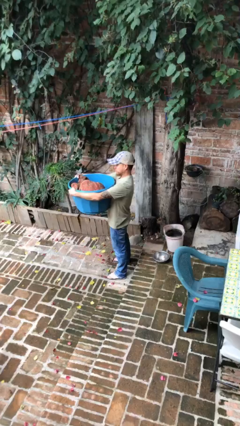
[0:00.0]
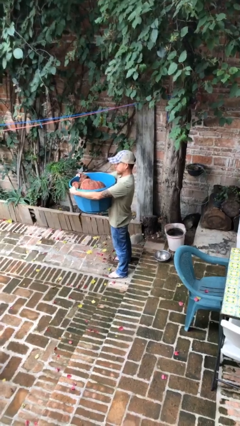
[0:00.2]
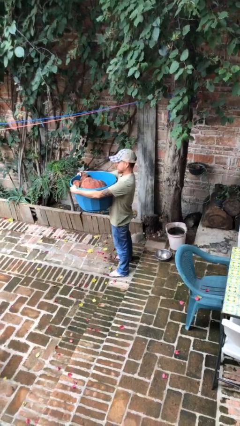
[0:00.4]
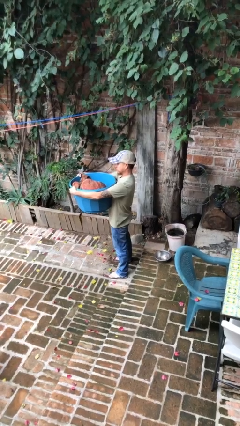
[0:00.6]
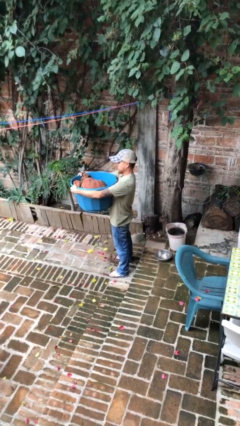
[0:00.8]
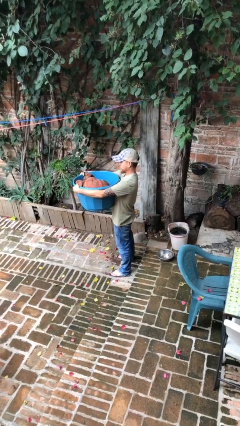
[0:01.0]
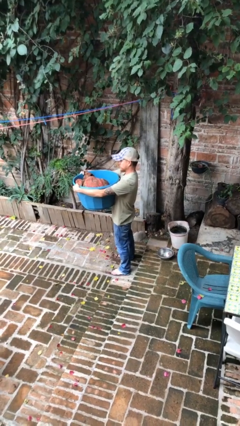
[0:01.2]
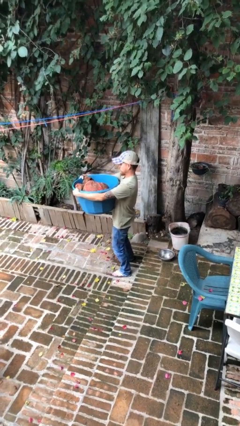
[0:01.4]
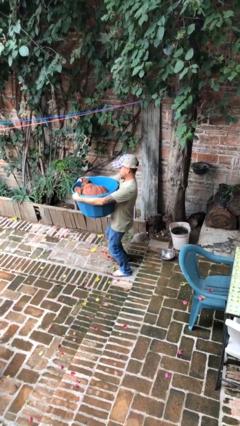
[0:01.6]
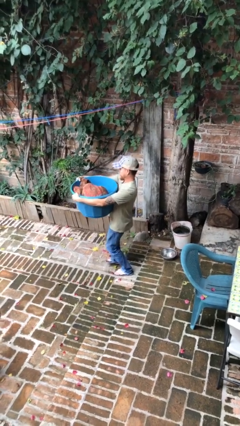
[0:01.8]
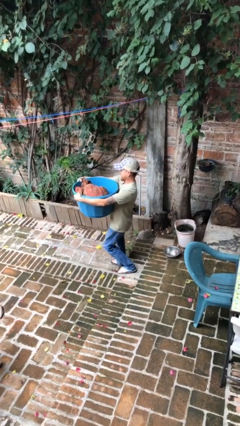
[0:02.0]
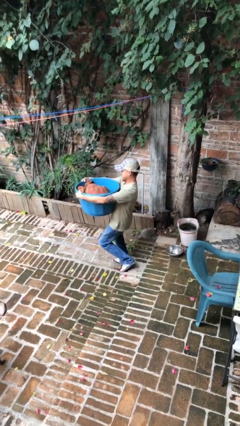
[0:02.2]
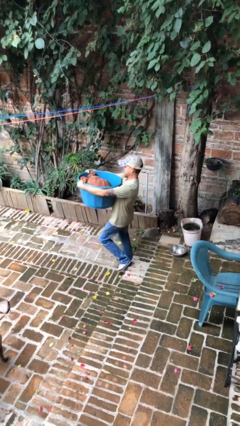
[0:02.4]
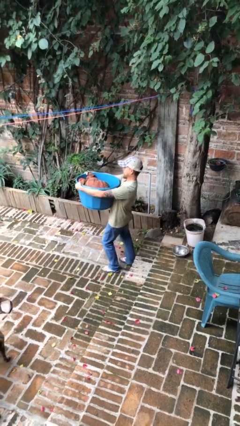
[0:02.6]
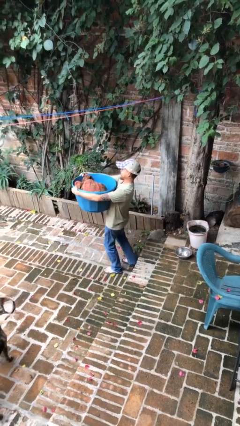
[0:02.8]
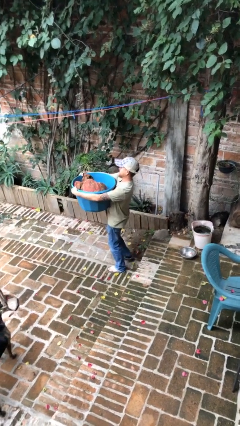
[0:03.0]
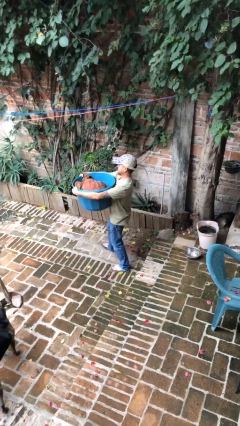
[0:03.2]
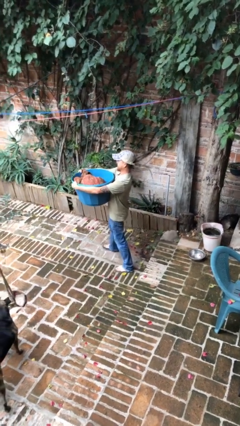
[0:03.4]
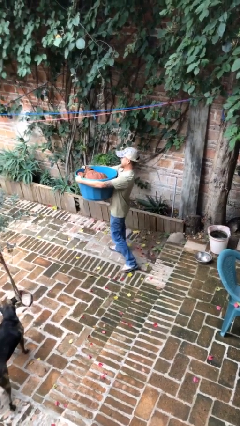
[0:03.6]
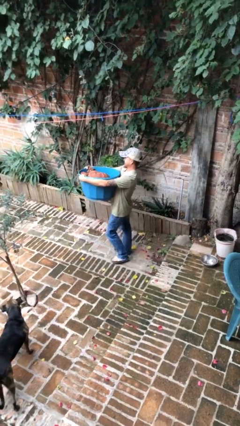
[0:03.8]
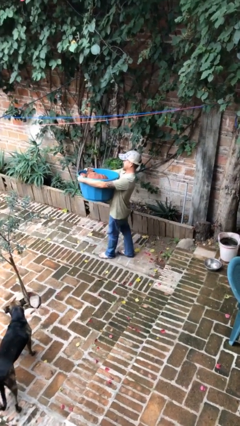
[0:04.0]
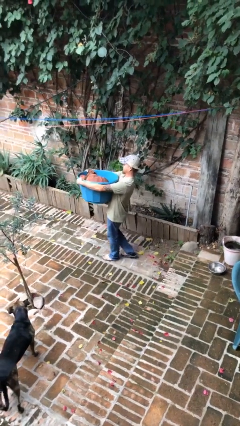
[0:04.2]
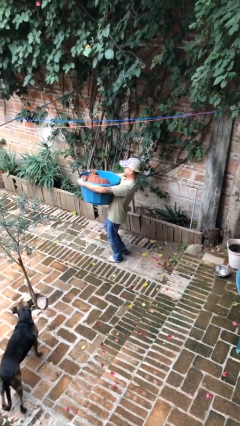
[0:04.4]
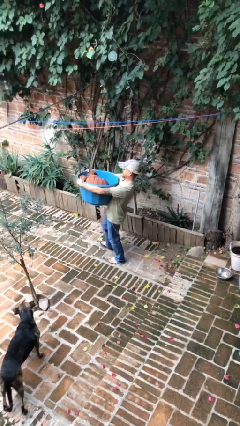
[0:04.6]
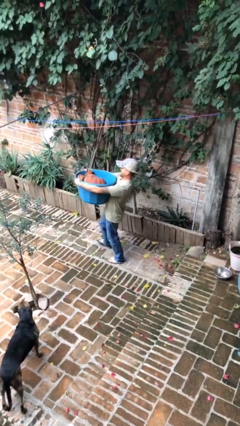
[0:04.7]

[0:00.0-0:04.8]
person carries heavy object

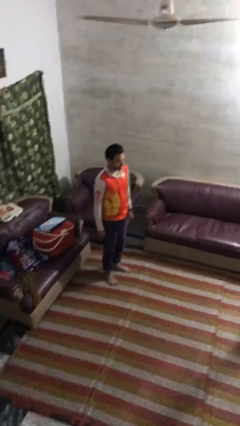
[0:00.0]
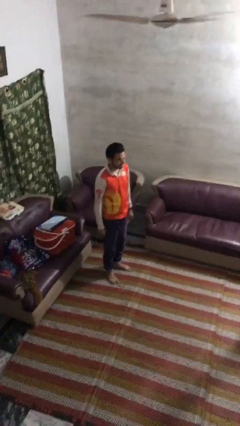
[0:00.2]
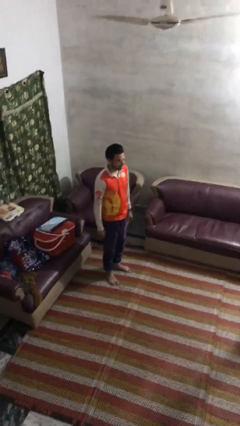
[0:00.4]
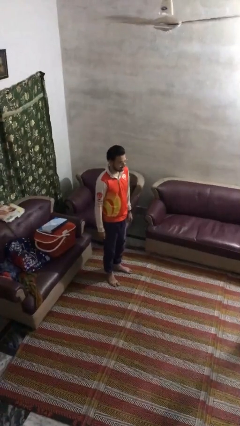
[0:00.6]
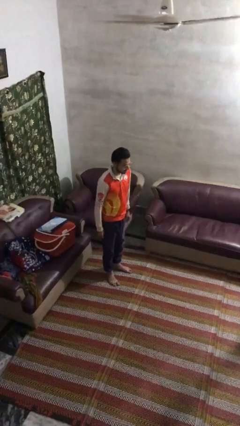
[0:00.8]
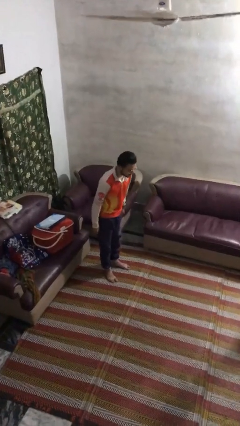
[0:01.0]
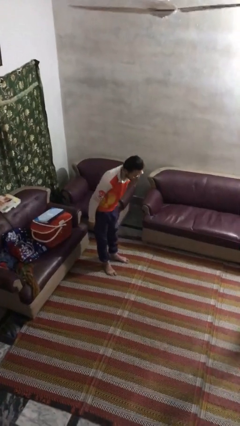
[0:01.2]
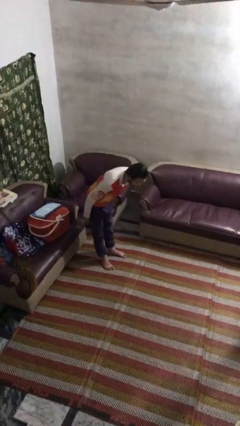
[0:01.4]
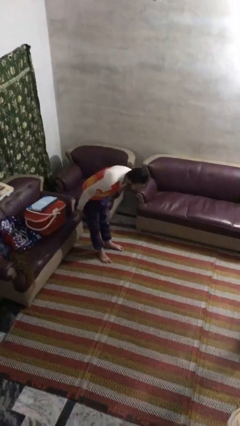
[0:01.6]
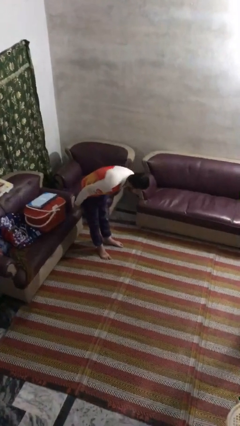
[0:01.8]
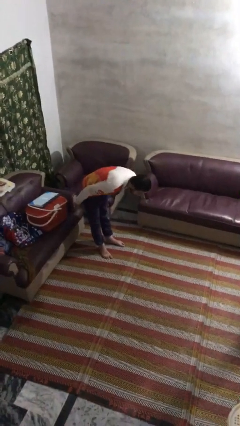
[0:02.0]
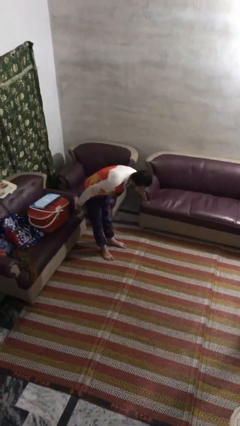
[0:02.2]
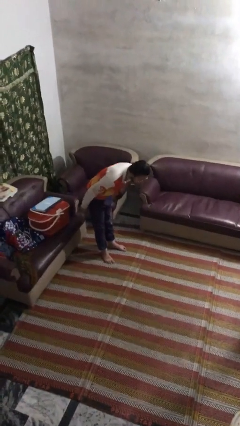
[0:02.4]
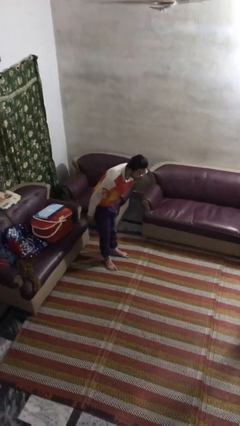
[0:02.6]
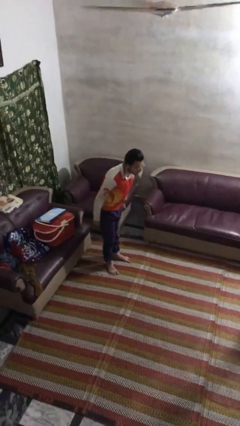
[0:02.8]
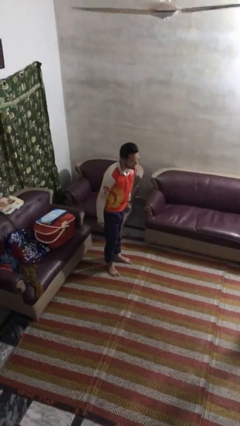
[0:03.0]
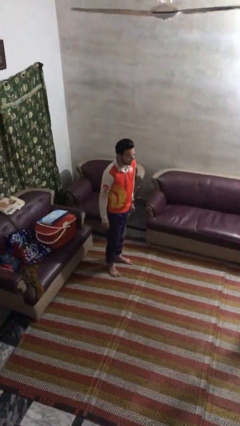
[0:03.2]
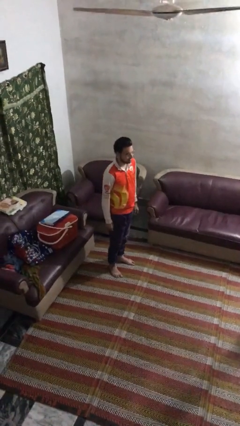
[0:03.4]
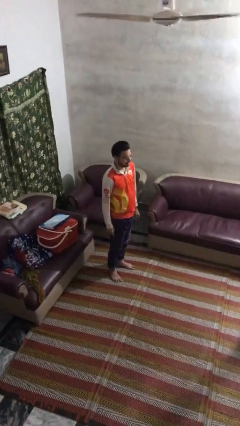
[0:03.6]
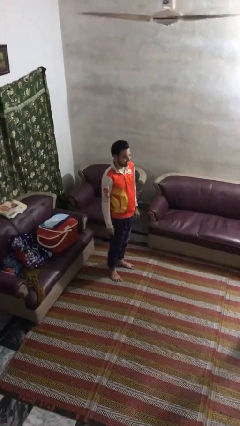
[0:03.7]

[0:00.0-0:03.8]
person bows

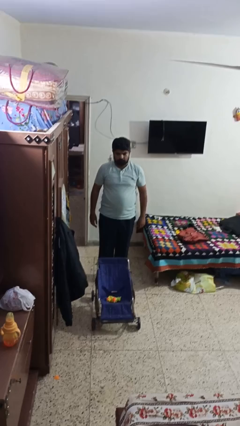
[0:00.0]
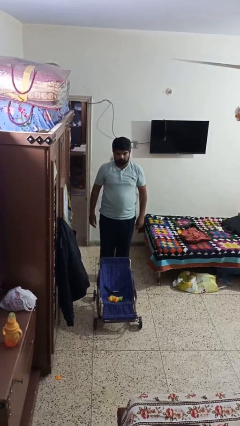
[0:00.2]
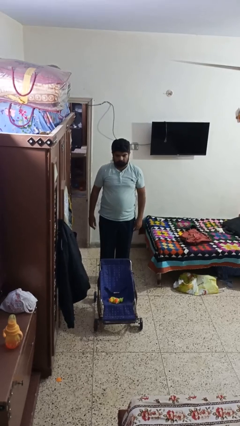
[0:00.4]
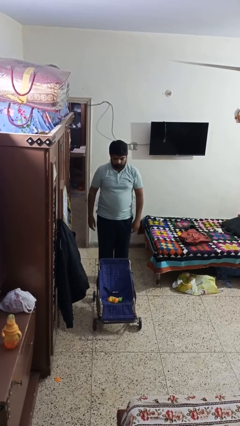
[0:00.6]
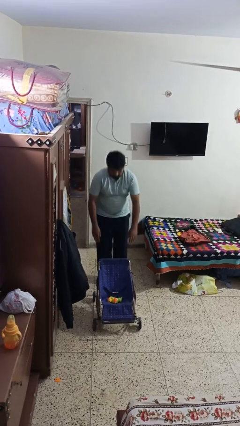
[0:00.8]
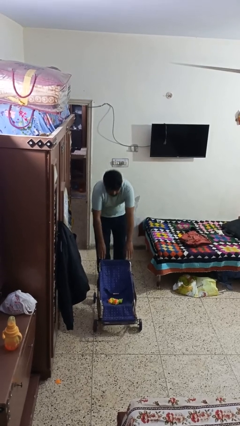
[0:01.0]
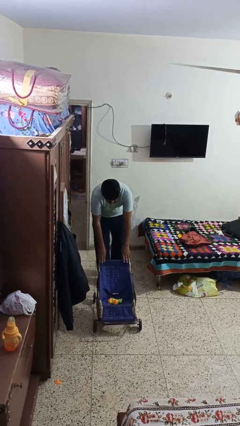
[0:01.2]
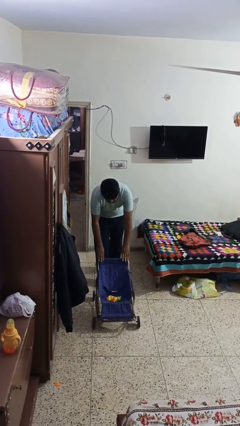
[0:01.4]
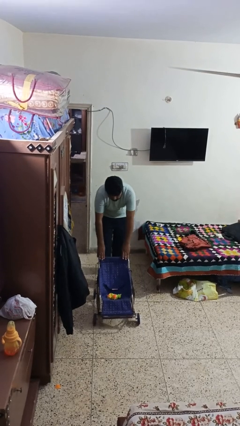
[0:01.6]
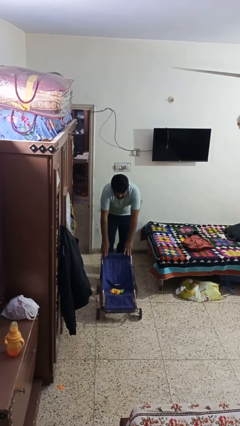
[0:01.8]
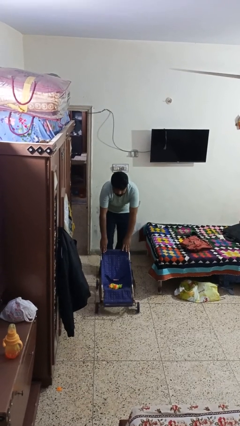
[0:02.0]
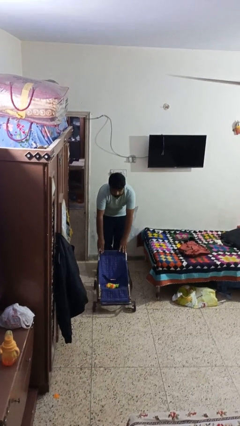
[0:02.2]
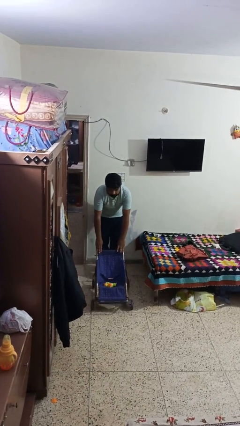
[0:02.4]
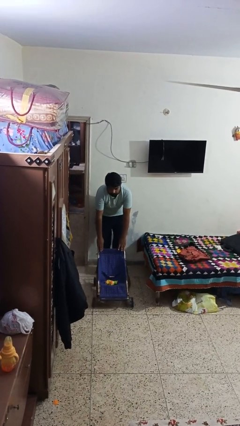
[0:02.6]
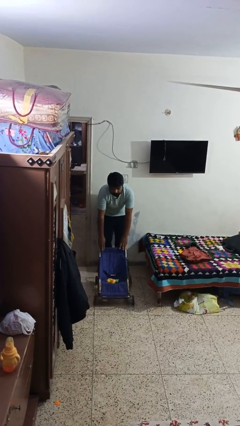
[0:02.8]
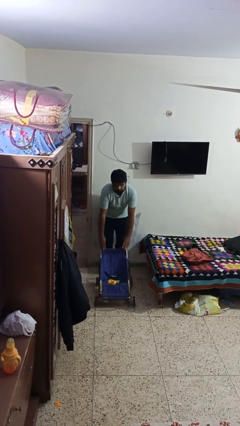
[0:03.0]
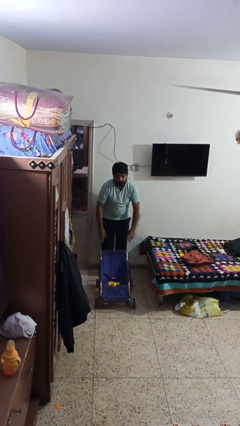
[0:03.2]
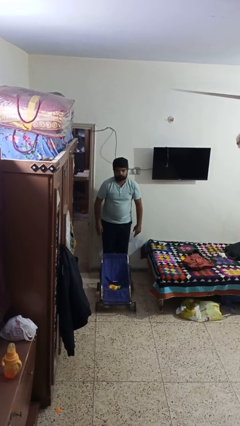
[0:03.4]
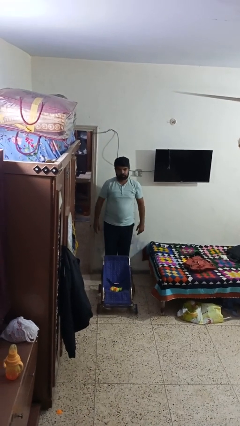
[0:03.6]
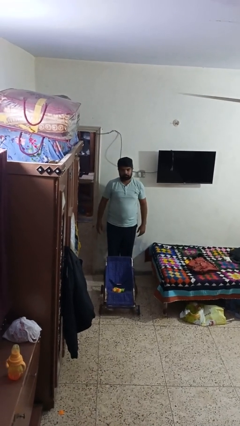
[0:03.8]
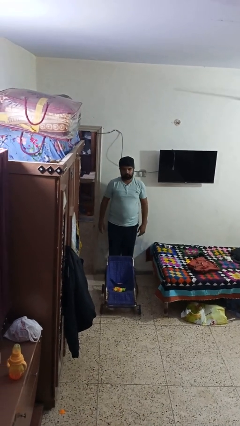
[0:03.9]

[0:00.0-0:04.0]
person pulls wheeled cart

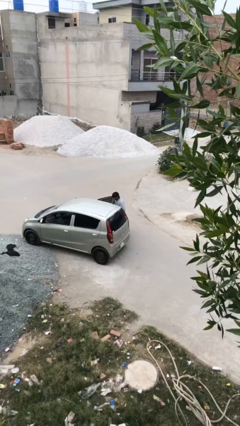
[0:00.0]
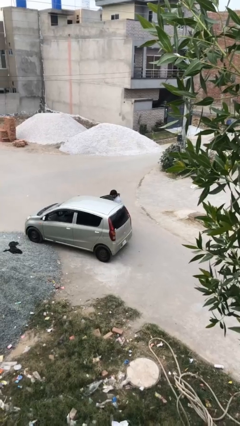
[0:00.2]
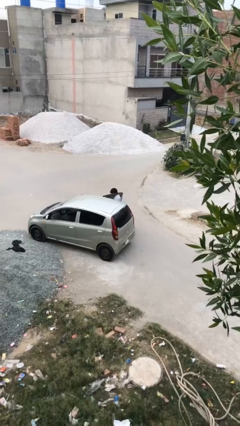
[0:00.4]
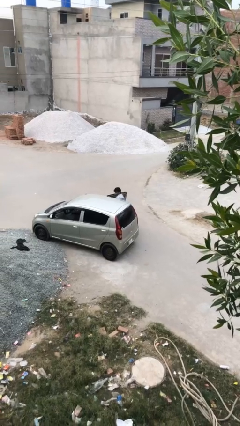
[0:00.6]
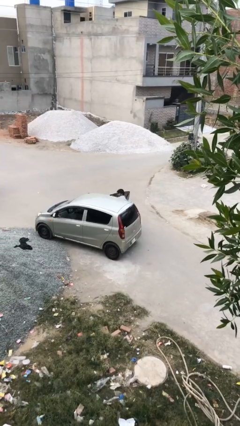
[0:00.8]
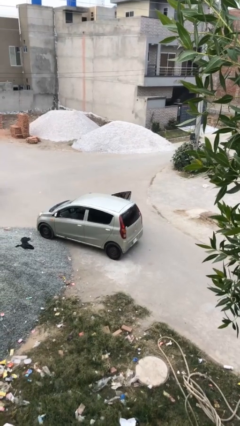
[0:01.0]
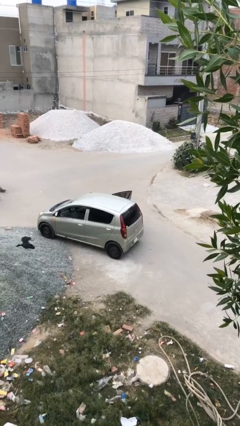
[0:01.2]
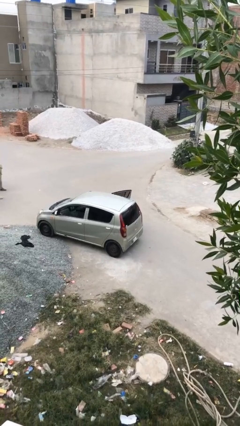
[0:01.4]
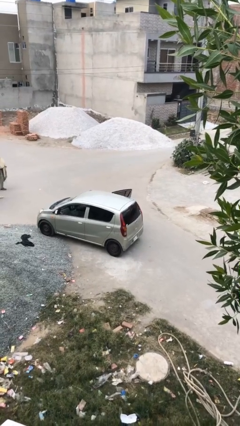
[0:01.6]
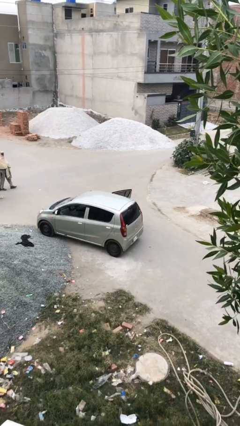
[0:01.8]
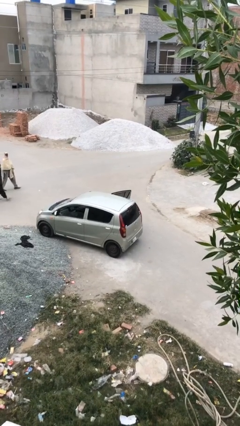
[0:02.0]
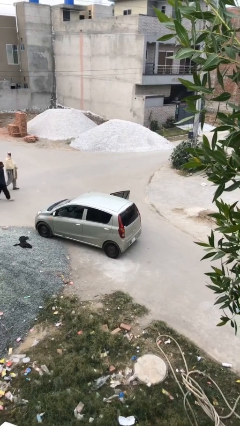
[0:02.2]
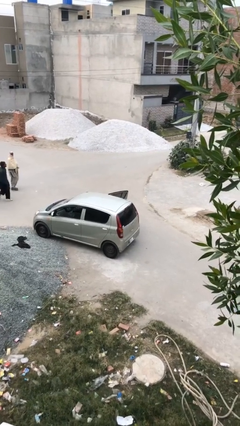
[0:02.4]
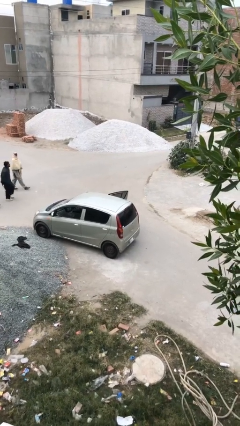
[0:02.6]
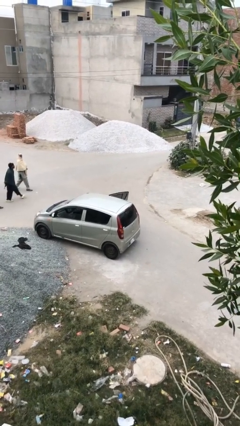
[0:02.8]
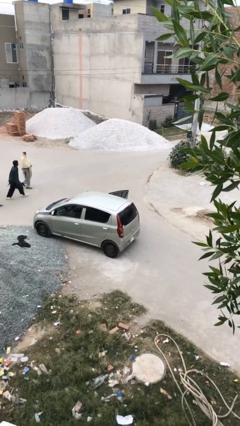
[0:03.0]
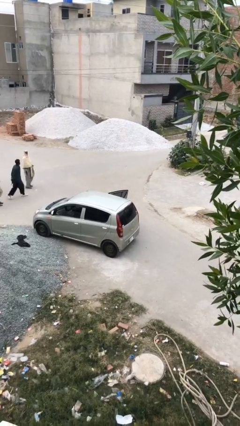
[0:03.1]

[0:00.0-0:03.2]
person enters car

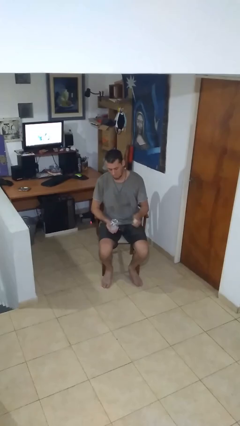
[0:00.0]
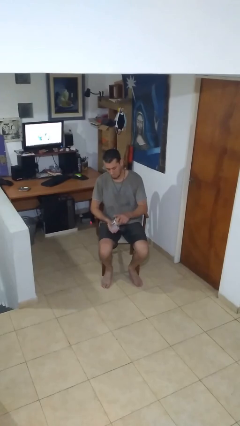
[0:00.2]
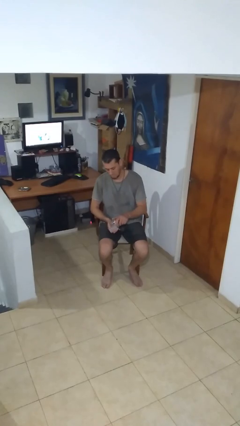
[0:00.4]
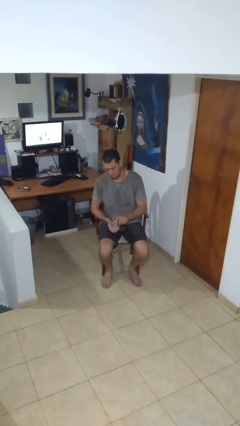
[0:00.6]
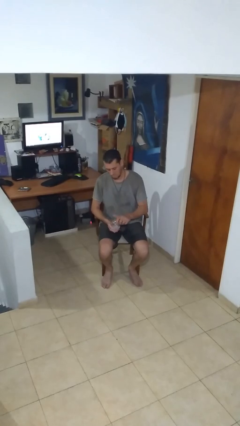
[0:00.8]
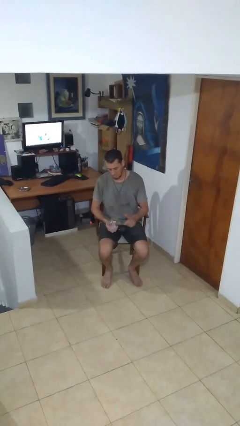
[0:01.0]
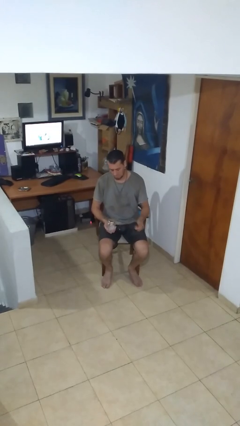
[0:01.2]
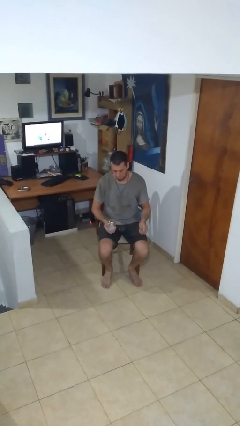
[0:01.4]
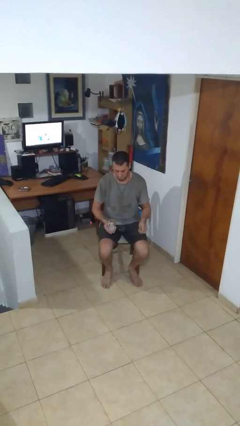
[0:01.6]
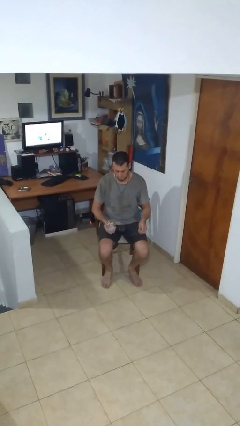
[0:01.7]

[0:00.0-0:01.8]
person closes jar
